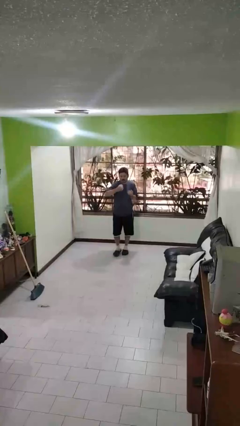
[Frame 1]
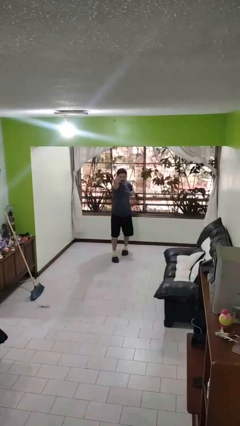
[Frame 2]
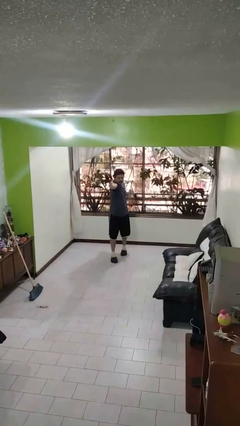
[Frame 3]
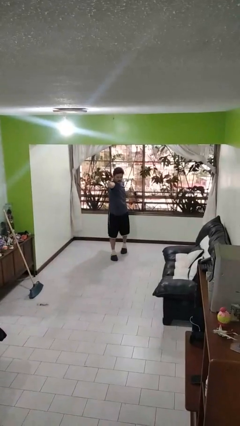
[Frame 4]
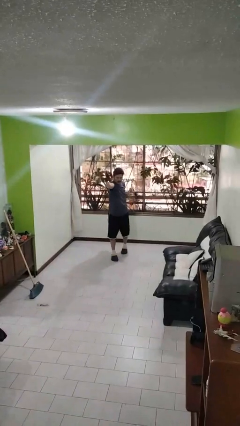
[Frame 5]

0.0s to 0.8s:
person punches

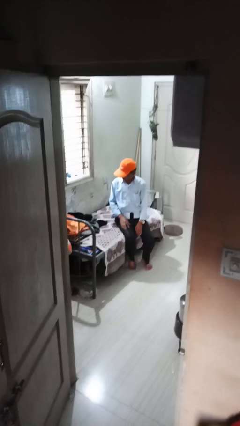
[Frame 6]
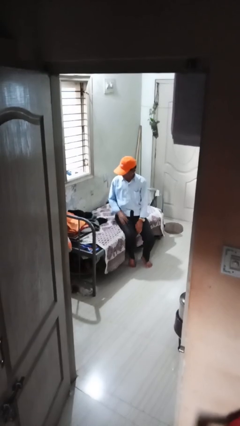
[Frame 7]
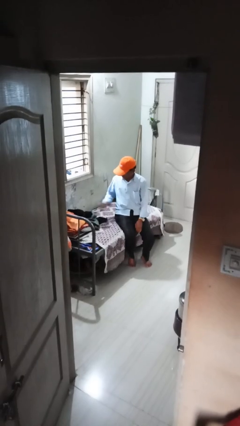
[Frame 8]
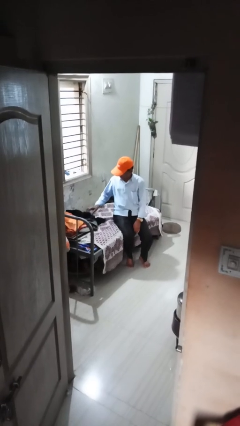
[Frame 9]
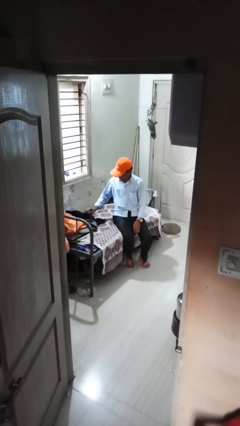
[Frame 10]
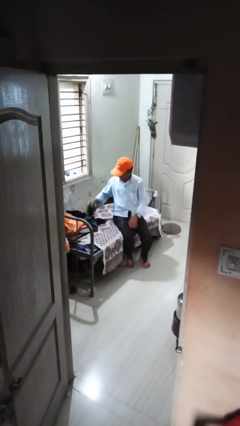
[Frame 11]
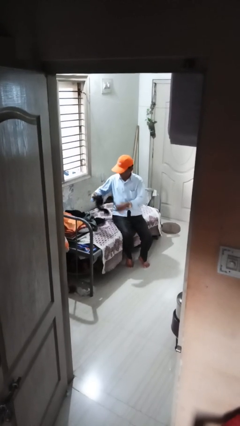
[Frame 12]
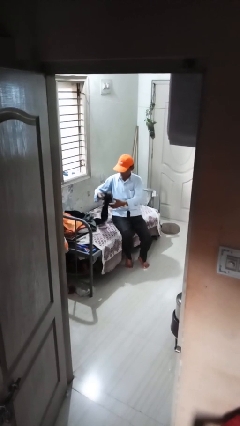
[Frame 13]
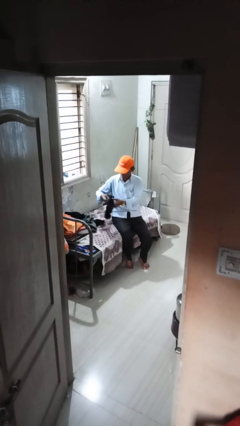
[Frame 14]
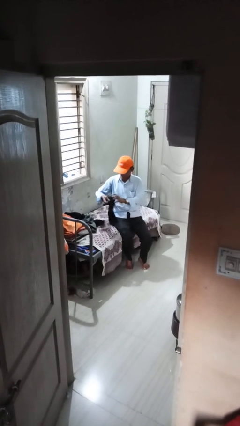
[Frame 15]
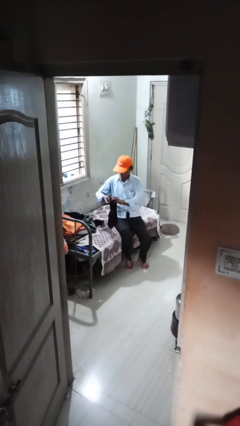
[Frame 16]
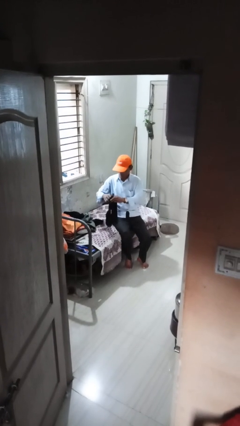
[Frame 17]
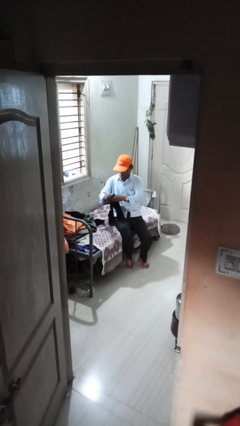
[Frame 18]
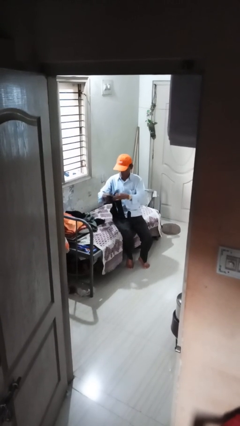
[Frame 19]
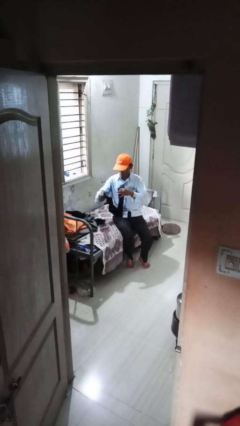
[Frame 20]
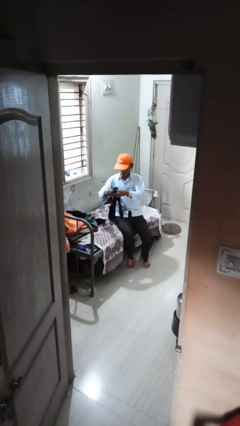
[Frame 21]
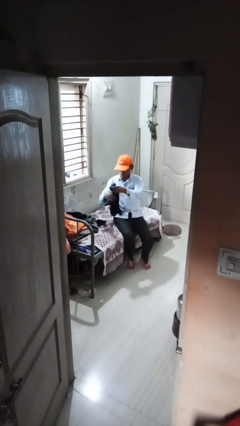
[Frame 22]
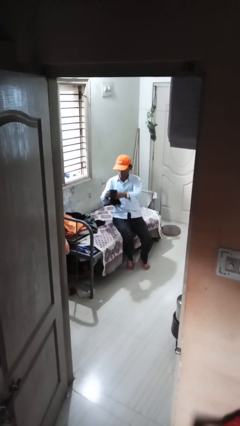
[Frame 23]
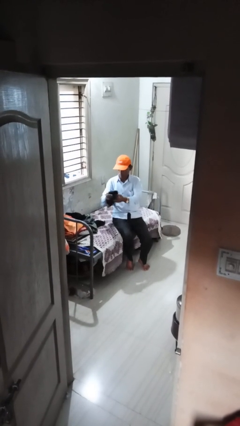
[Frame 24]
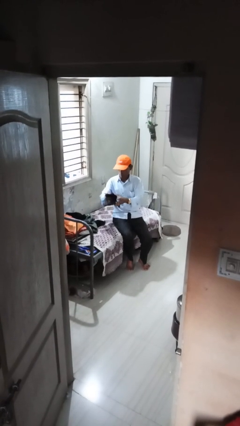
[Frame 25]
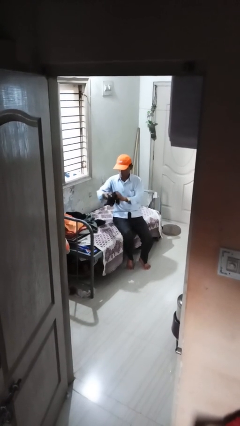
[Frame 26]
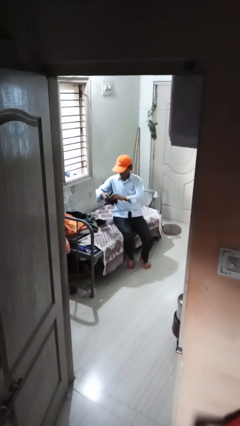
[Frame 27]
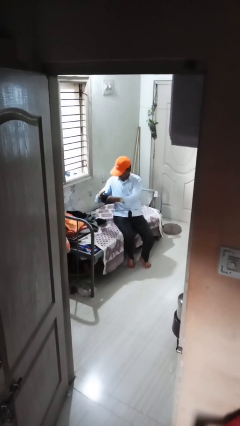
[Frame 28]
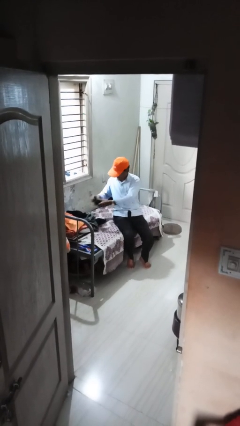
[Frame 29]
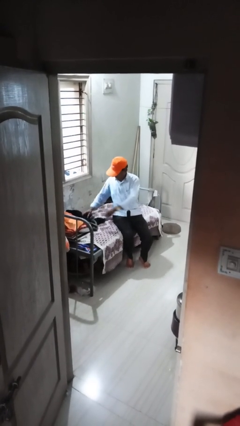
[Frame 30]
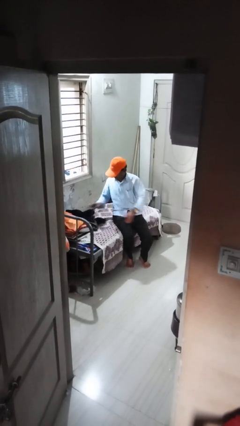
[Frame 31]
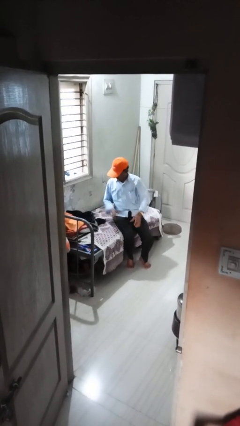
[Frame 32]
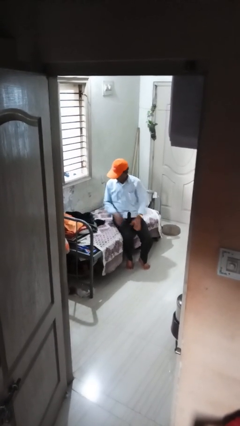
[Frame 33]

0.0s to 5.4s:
person folds socks

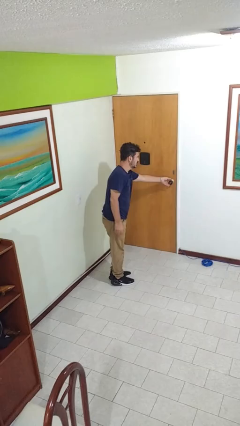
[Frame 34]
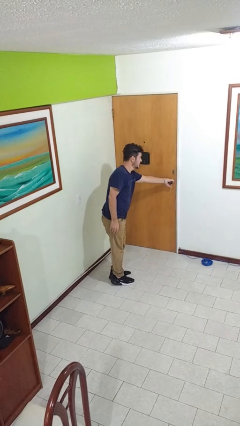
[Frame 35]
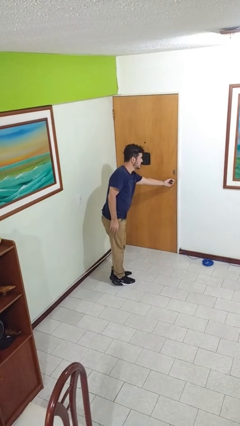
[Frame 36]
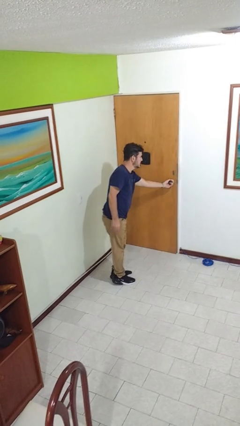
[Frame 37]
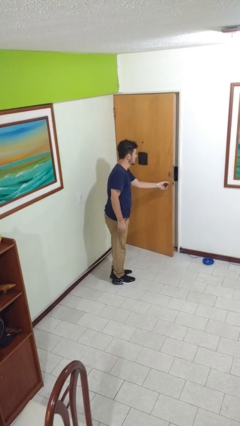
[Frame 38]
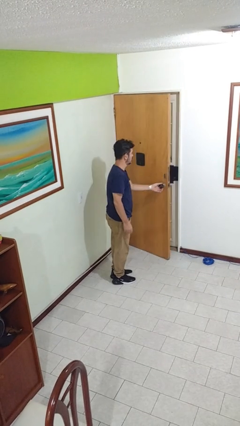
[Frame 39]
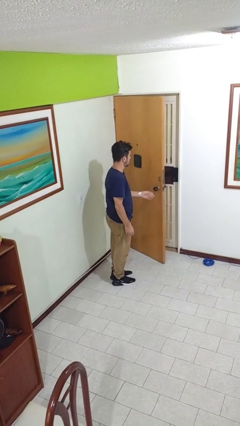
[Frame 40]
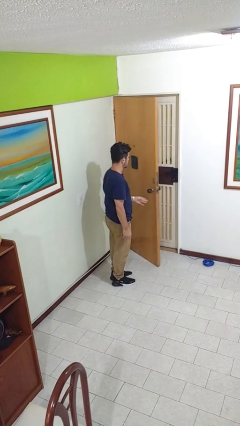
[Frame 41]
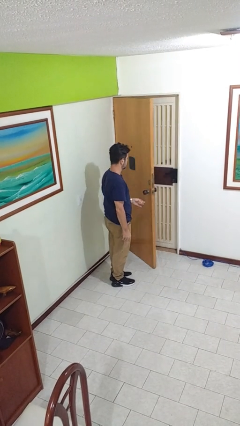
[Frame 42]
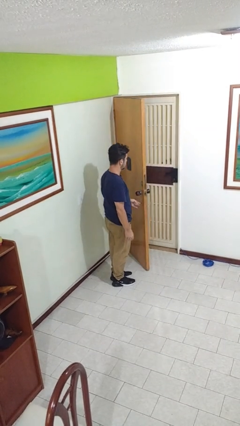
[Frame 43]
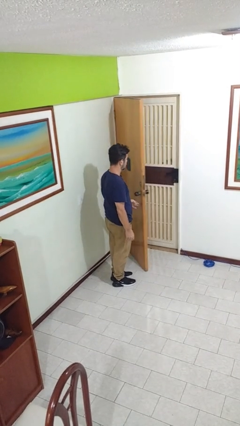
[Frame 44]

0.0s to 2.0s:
person opens facility door

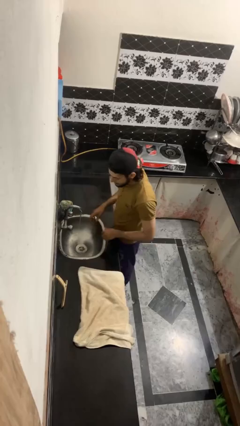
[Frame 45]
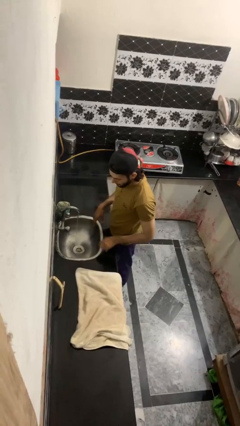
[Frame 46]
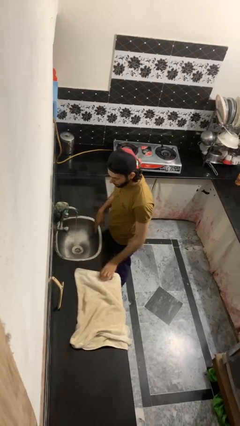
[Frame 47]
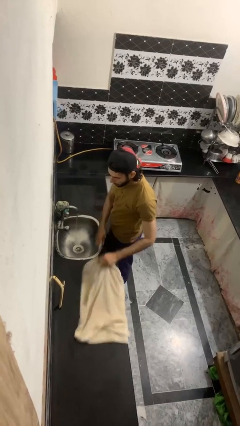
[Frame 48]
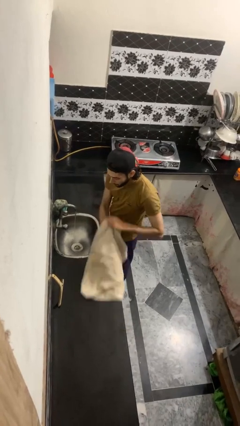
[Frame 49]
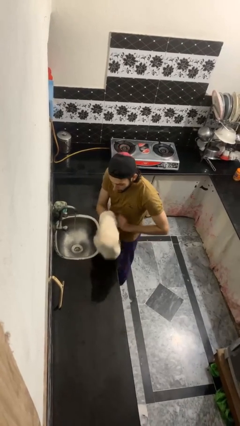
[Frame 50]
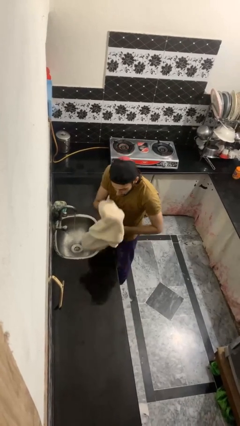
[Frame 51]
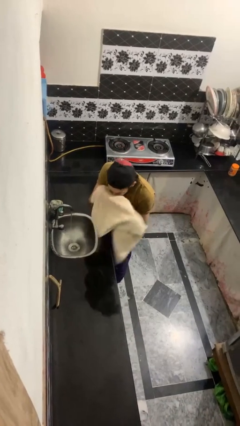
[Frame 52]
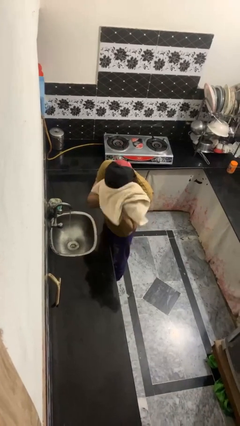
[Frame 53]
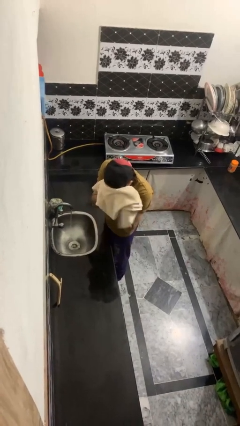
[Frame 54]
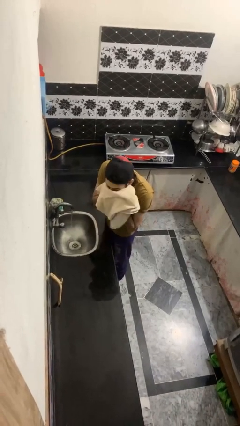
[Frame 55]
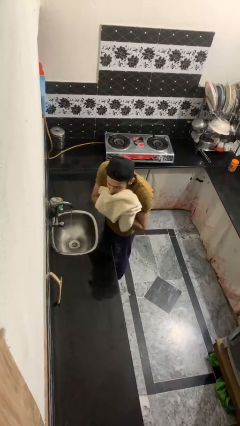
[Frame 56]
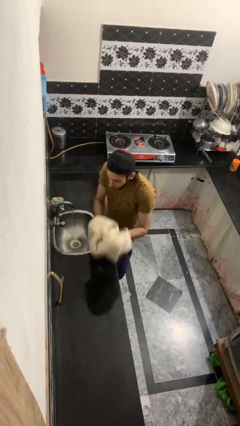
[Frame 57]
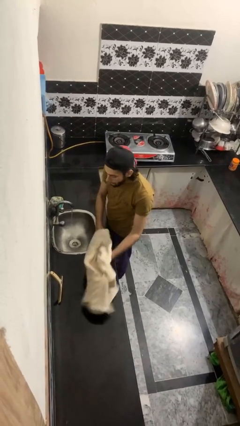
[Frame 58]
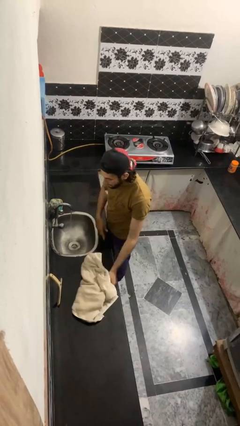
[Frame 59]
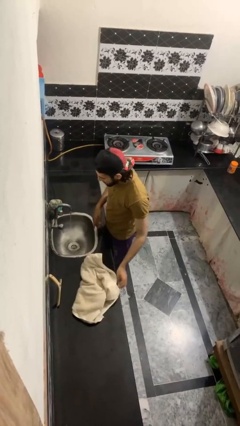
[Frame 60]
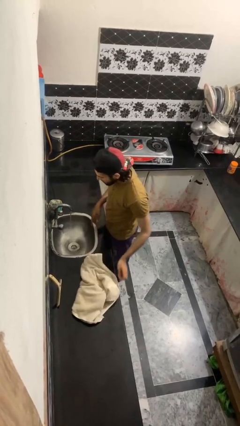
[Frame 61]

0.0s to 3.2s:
person dries face with towel

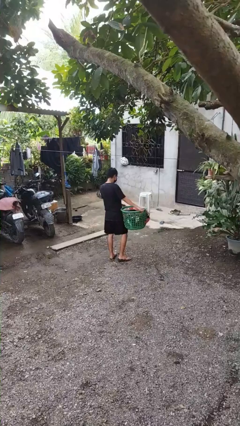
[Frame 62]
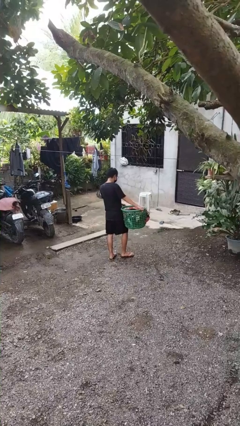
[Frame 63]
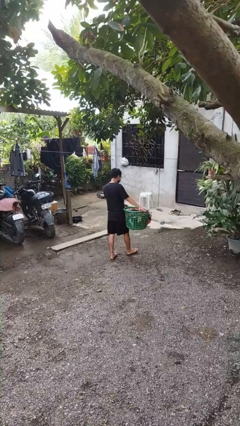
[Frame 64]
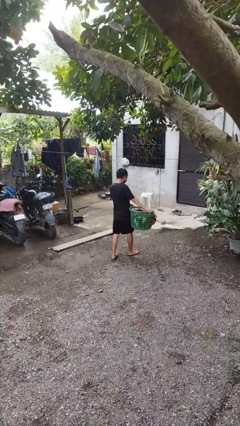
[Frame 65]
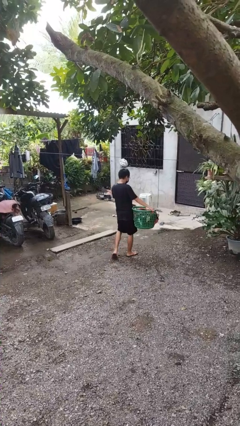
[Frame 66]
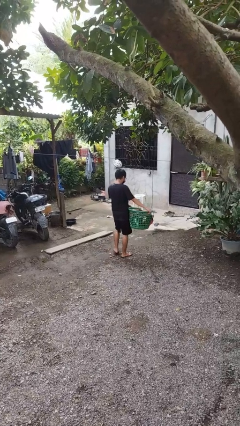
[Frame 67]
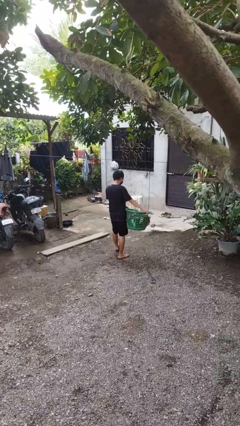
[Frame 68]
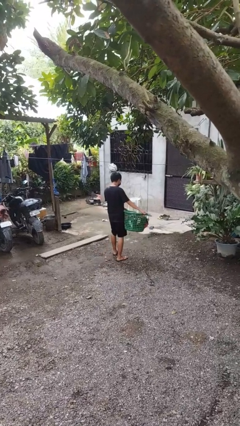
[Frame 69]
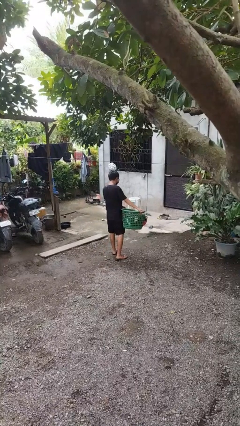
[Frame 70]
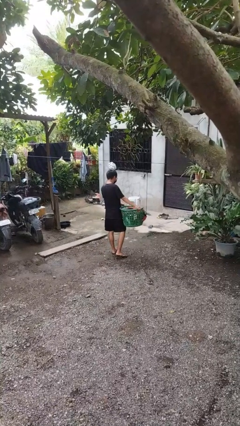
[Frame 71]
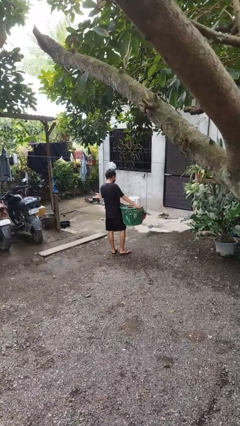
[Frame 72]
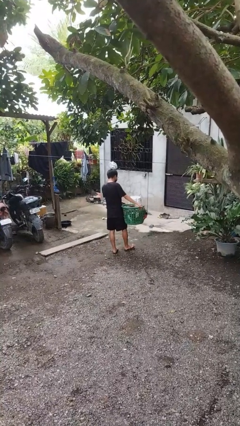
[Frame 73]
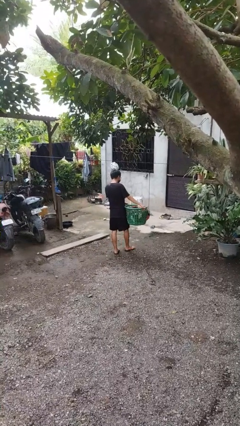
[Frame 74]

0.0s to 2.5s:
person carries laundry basket

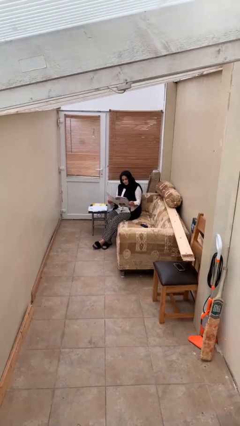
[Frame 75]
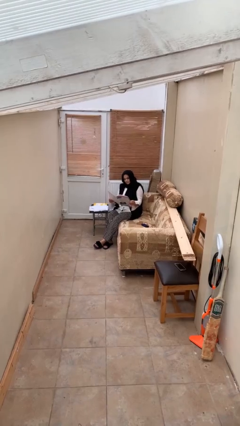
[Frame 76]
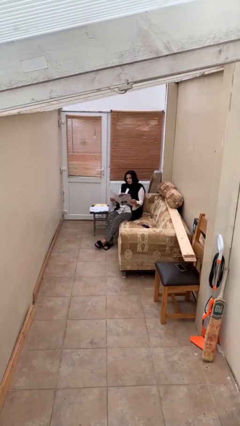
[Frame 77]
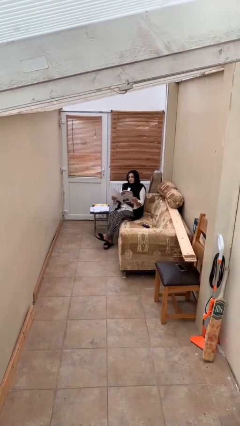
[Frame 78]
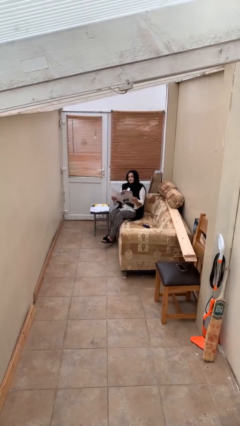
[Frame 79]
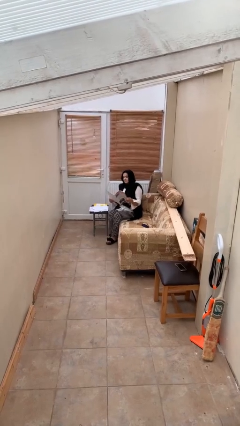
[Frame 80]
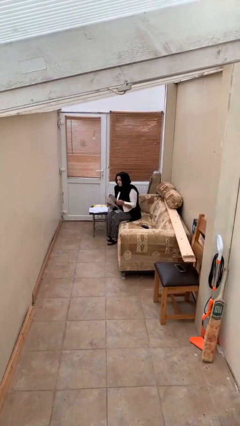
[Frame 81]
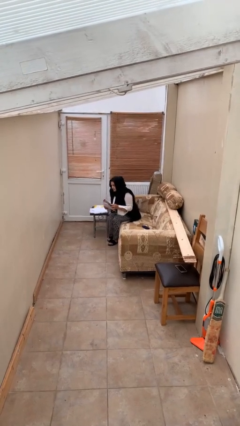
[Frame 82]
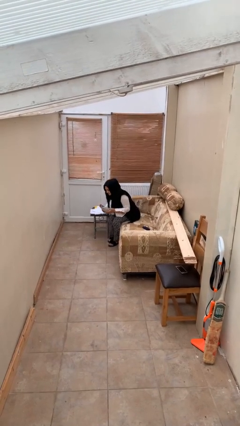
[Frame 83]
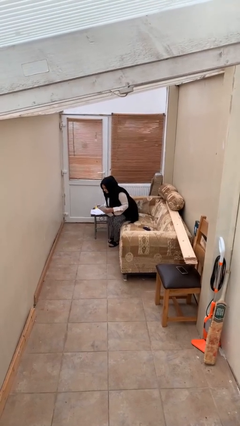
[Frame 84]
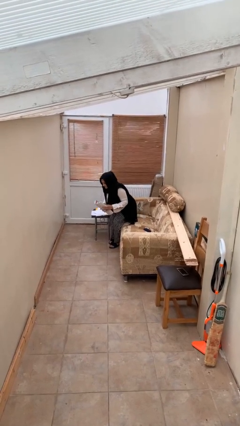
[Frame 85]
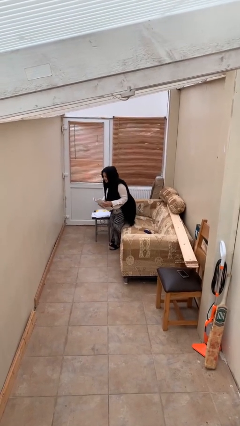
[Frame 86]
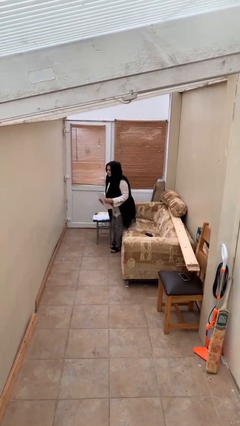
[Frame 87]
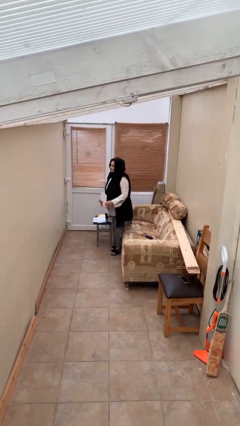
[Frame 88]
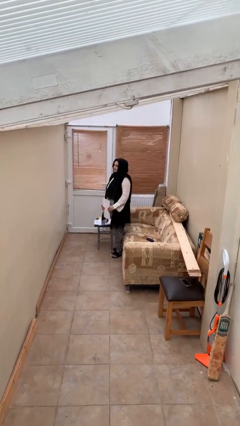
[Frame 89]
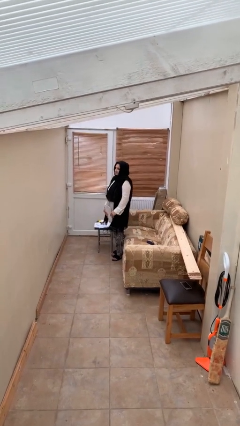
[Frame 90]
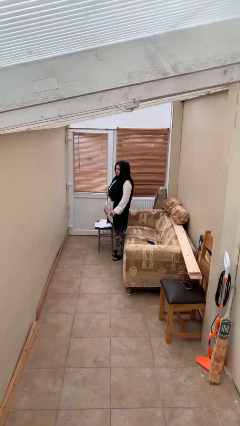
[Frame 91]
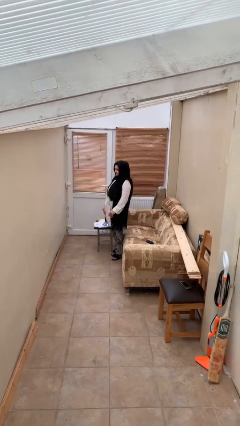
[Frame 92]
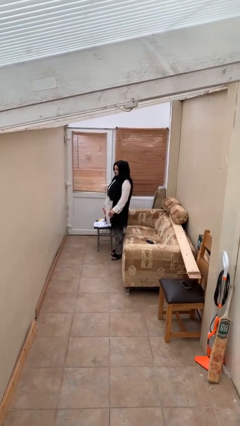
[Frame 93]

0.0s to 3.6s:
person stands up

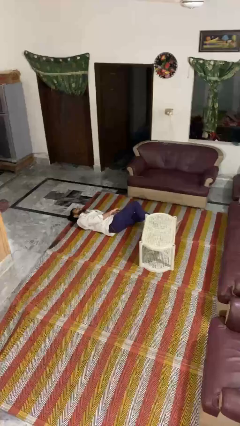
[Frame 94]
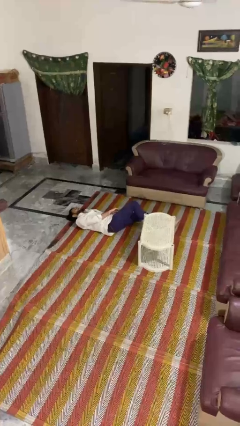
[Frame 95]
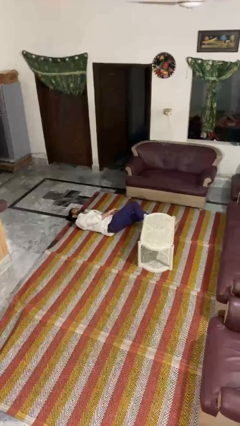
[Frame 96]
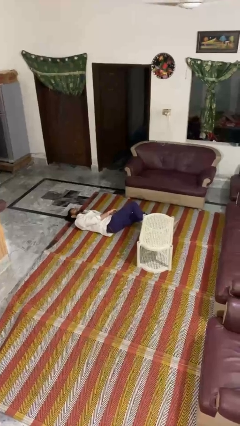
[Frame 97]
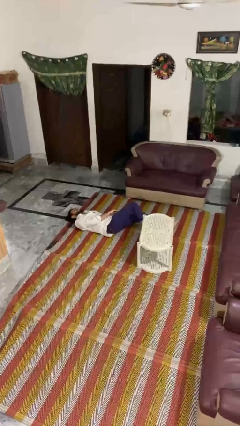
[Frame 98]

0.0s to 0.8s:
person lies down on floor
